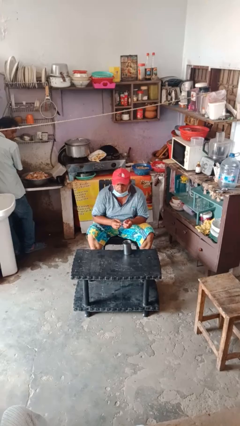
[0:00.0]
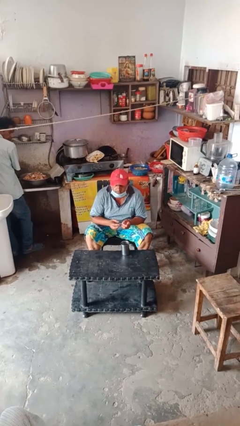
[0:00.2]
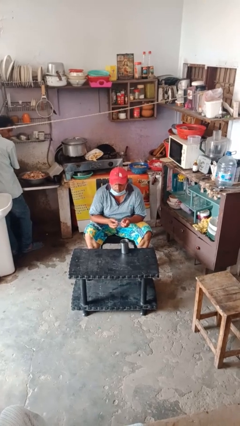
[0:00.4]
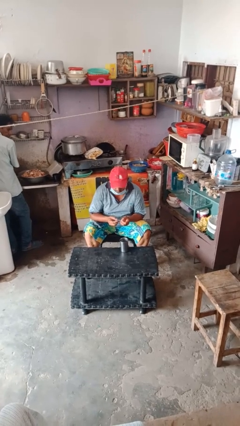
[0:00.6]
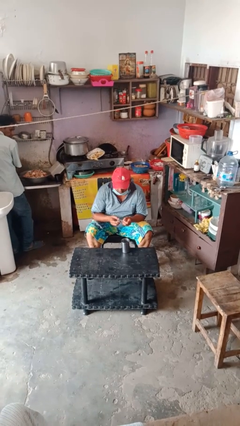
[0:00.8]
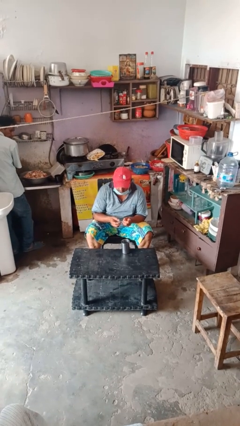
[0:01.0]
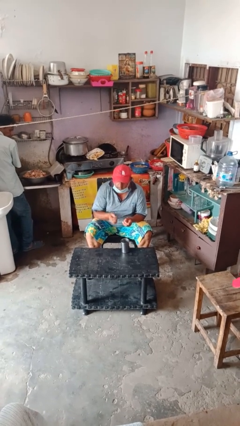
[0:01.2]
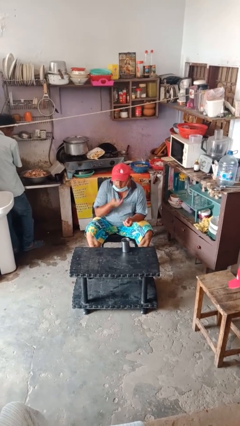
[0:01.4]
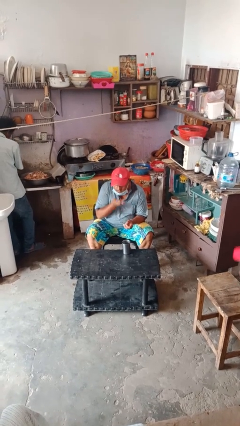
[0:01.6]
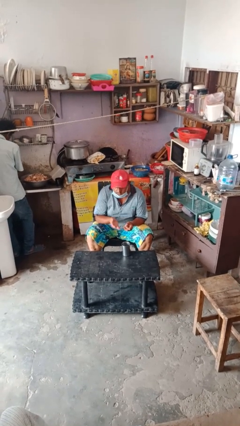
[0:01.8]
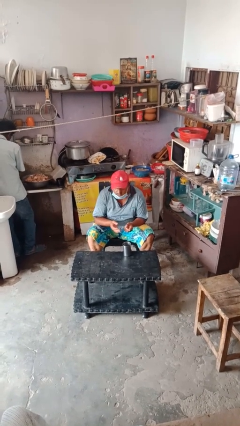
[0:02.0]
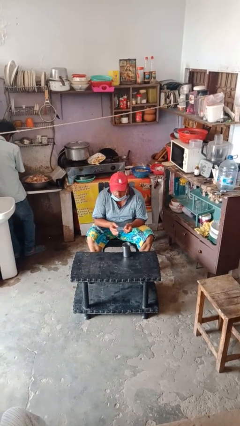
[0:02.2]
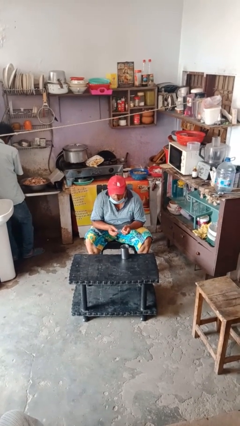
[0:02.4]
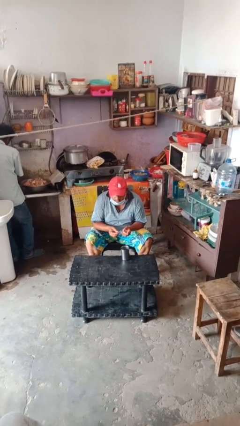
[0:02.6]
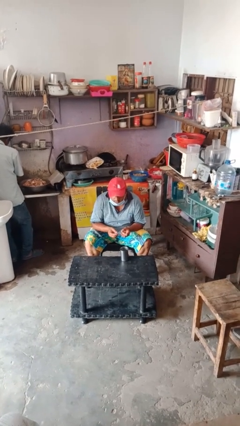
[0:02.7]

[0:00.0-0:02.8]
person takes medicine pills

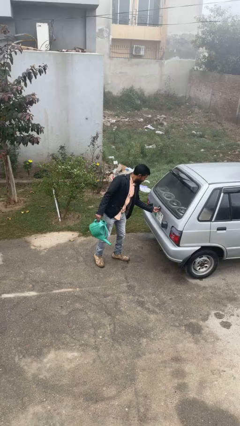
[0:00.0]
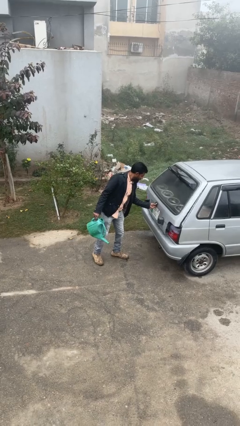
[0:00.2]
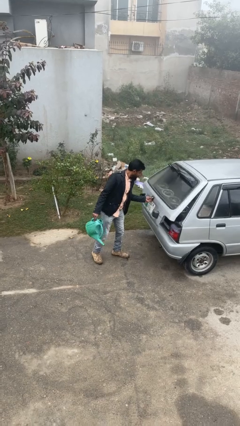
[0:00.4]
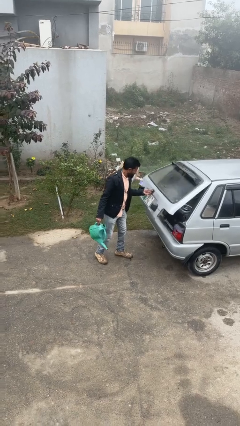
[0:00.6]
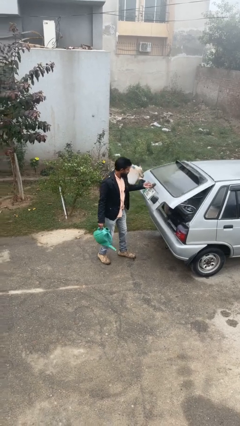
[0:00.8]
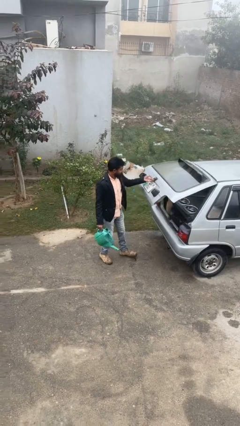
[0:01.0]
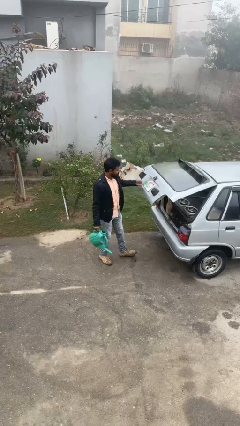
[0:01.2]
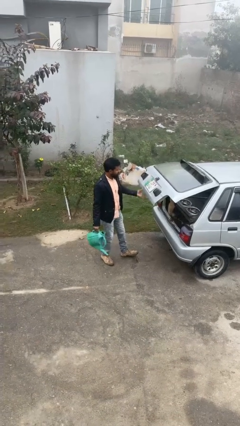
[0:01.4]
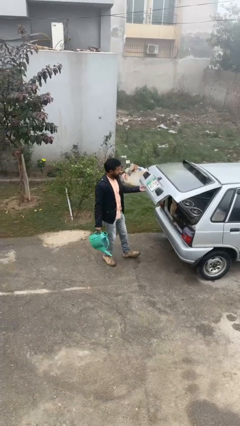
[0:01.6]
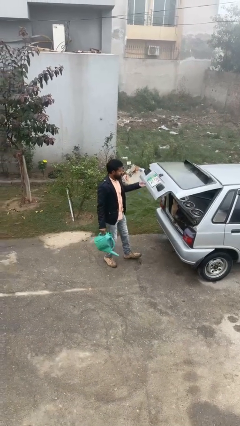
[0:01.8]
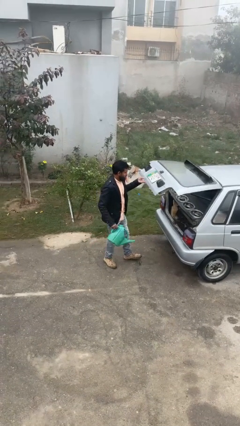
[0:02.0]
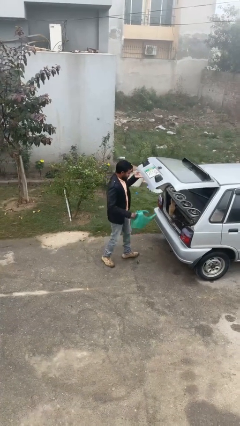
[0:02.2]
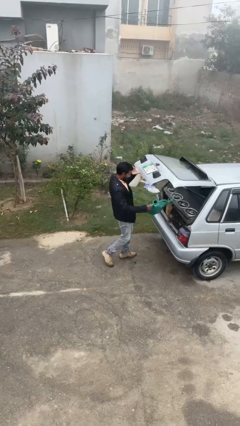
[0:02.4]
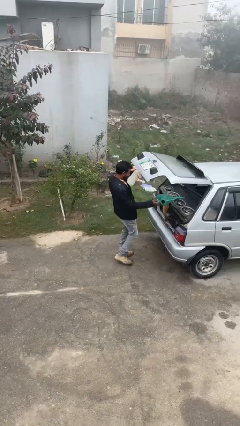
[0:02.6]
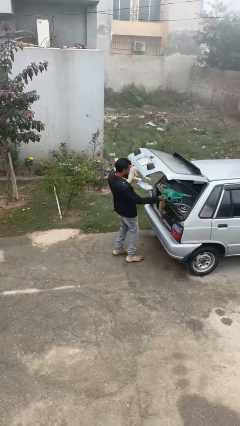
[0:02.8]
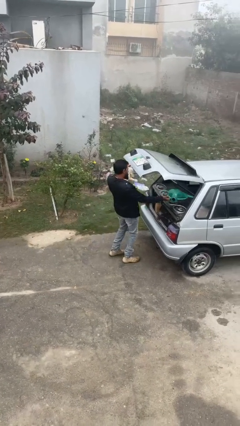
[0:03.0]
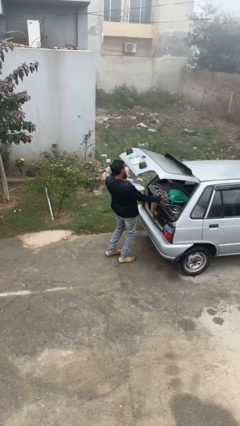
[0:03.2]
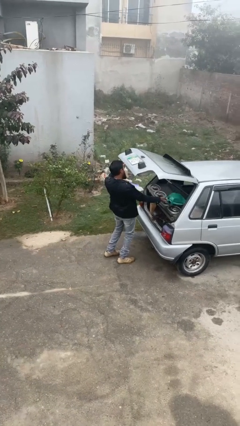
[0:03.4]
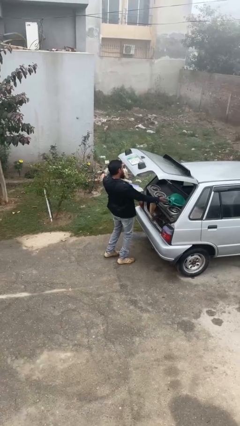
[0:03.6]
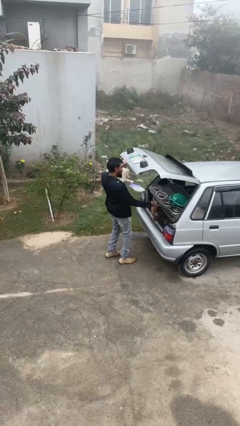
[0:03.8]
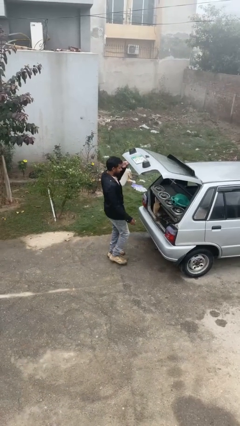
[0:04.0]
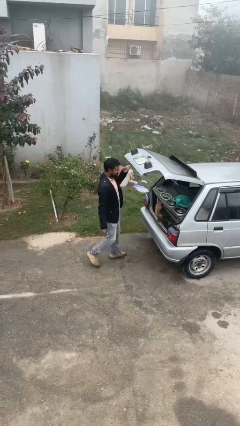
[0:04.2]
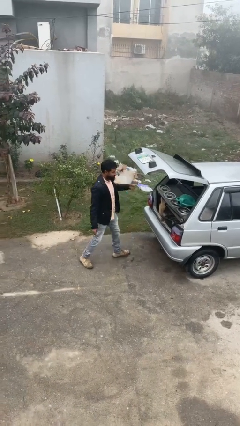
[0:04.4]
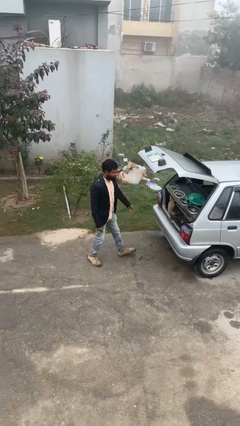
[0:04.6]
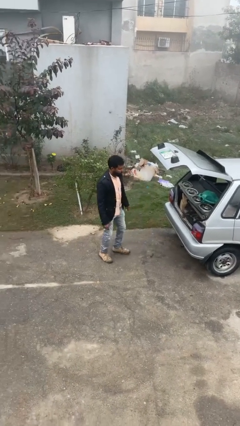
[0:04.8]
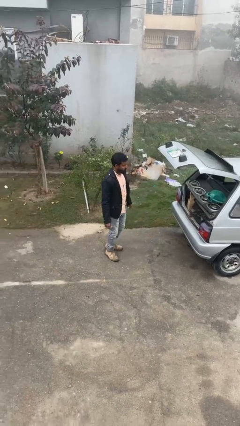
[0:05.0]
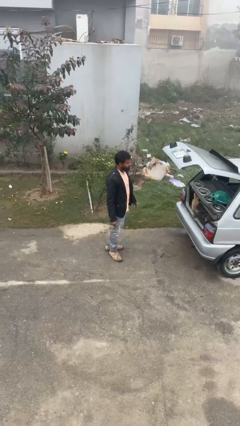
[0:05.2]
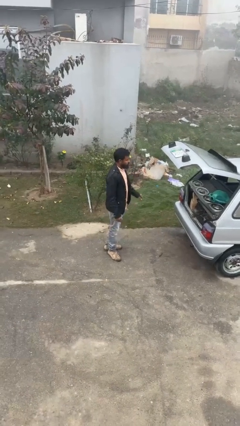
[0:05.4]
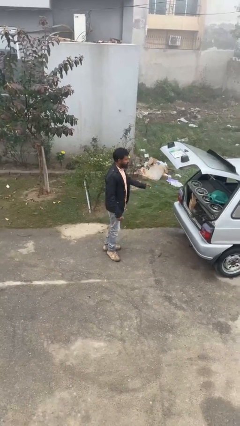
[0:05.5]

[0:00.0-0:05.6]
person loads car

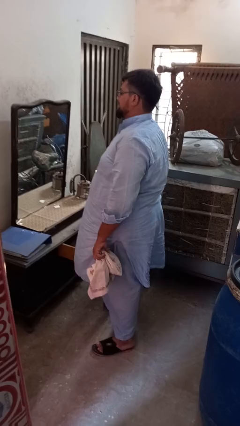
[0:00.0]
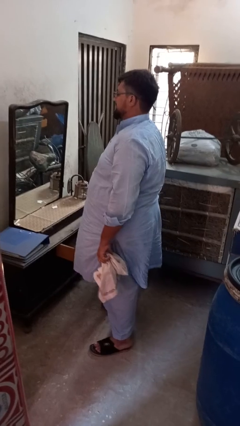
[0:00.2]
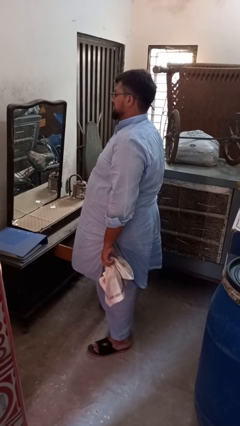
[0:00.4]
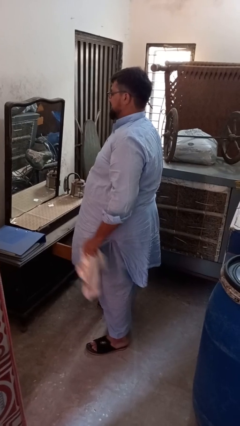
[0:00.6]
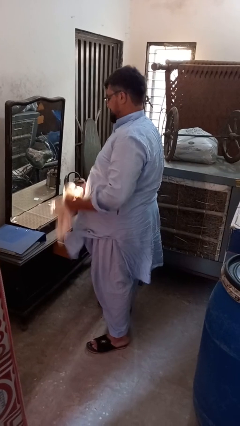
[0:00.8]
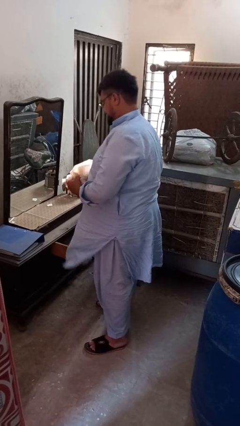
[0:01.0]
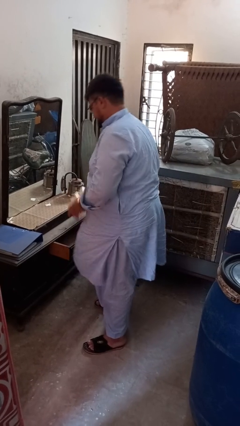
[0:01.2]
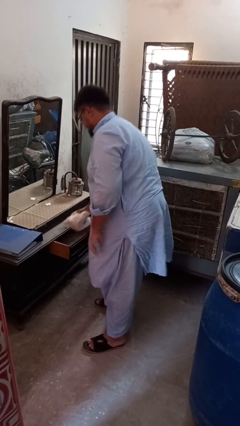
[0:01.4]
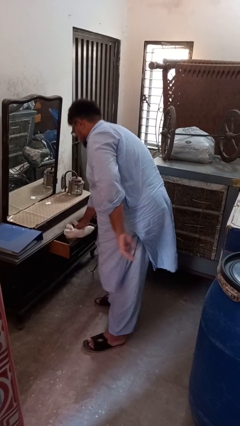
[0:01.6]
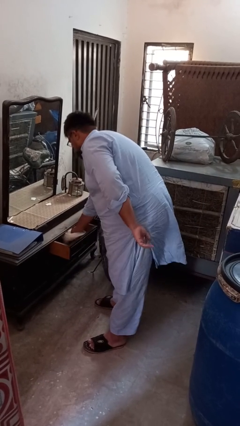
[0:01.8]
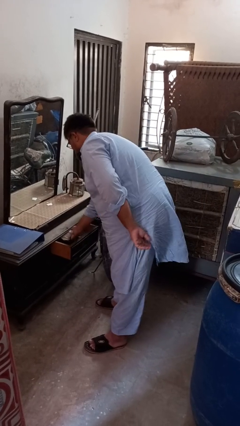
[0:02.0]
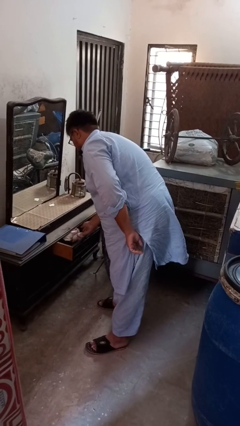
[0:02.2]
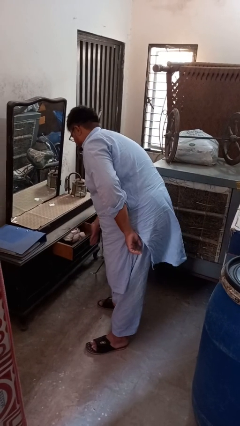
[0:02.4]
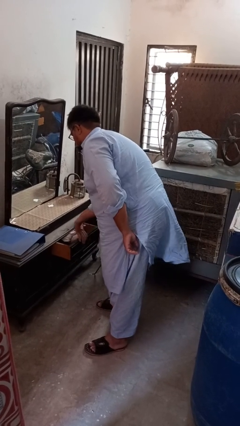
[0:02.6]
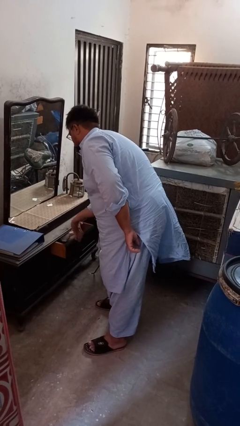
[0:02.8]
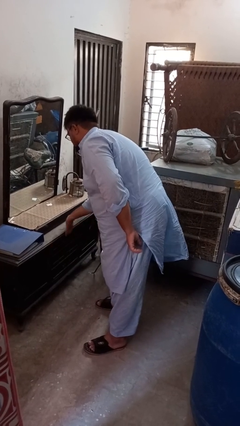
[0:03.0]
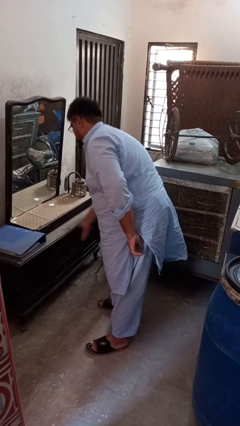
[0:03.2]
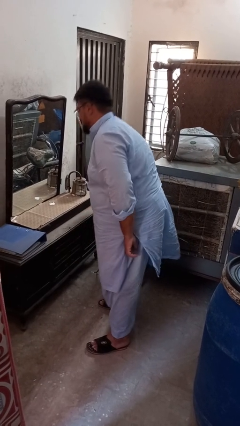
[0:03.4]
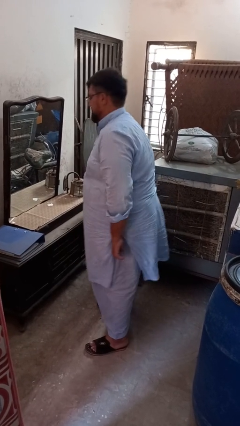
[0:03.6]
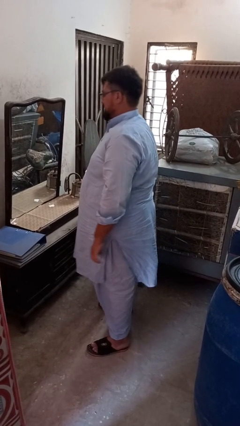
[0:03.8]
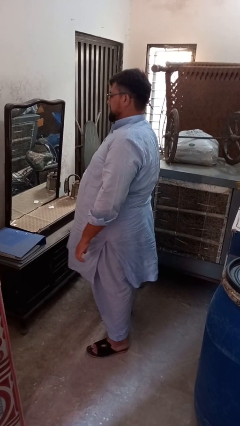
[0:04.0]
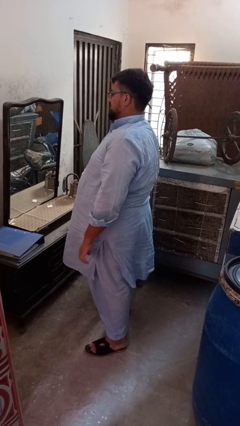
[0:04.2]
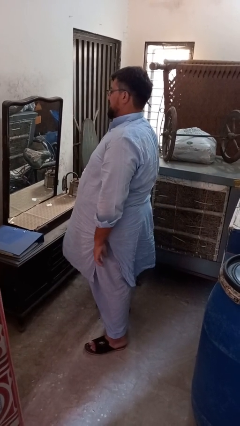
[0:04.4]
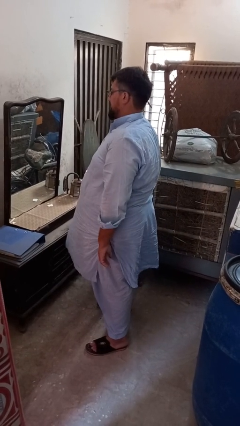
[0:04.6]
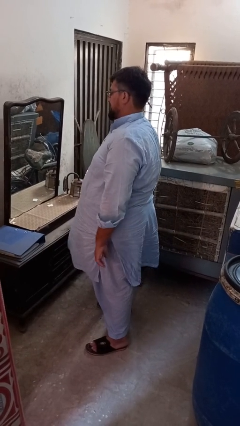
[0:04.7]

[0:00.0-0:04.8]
person puts clothes into dresser

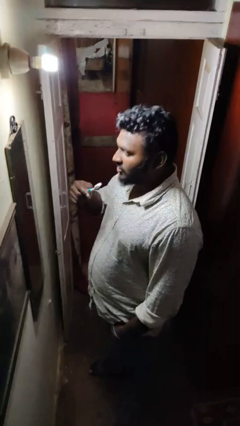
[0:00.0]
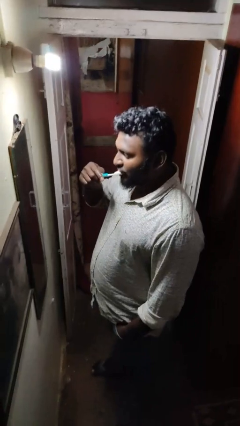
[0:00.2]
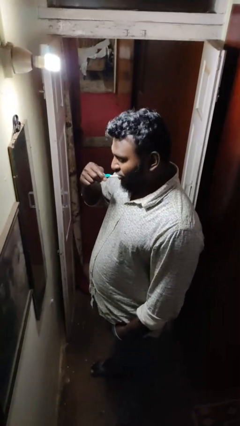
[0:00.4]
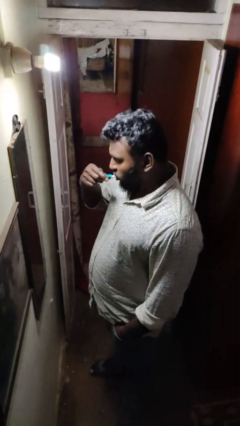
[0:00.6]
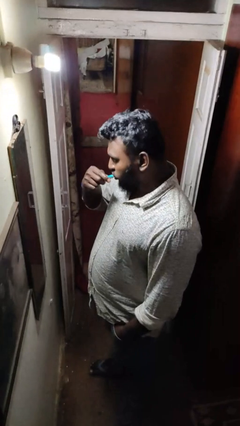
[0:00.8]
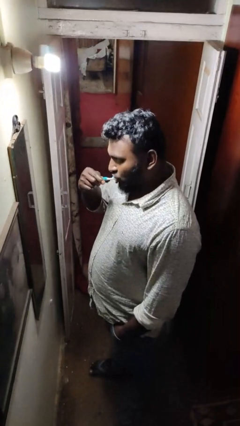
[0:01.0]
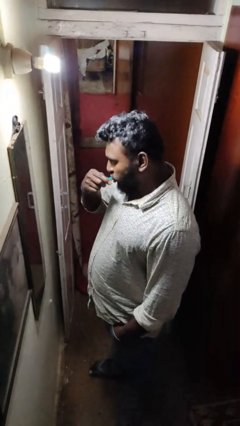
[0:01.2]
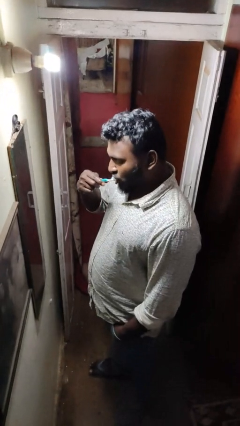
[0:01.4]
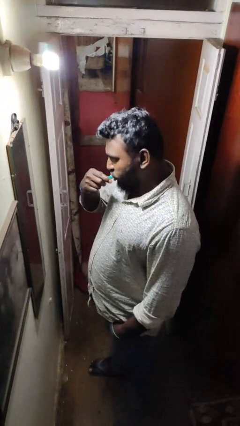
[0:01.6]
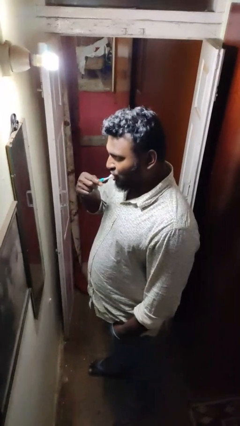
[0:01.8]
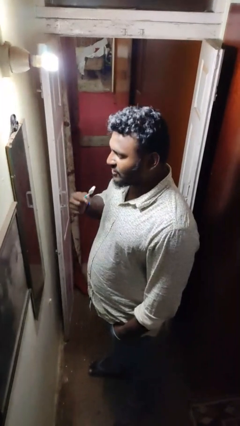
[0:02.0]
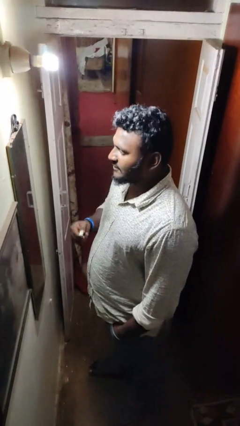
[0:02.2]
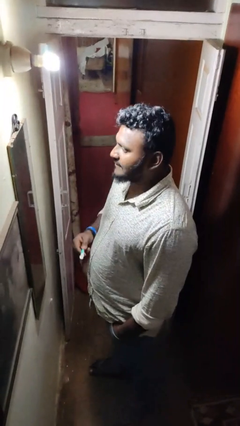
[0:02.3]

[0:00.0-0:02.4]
person brushes teeth

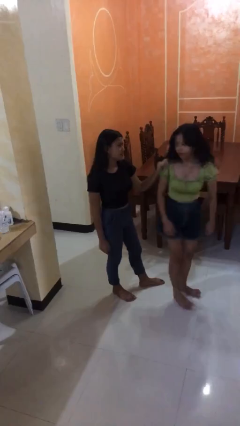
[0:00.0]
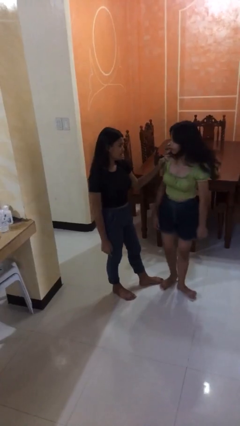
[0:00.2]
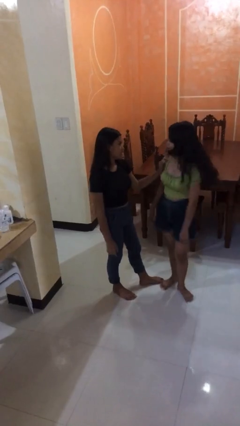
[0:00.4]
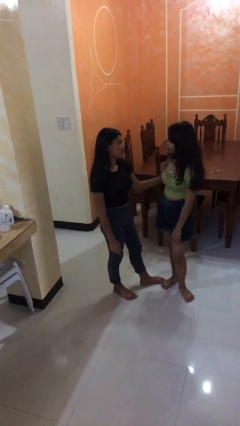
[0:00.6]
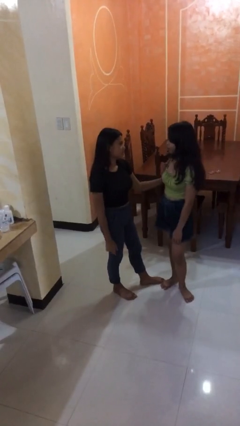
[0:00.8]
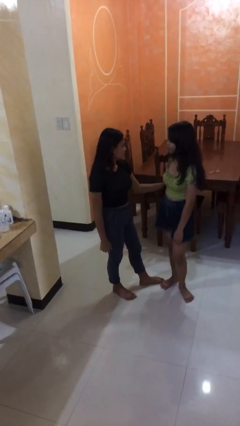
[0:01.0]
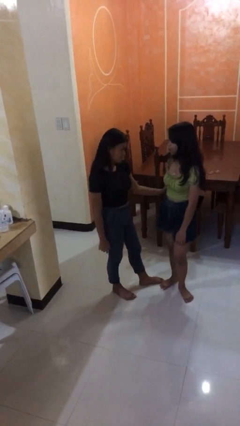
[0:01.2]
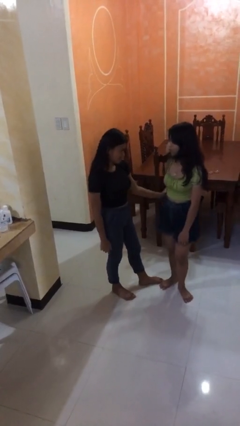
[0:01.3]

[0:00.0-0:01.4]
person spins person around

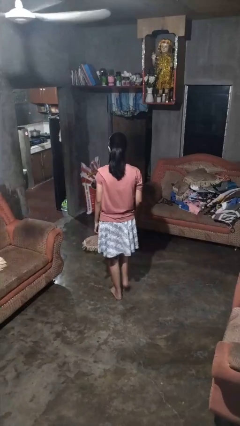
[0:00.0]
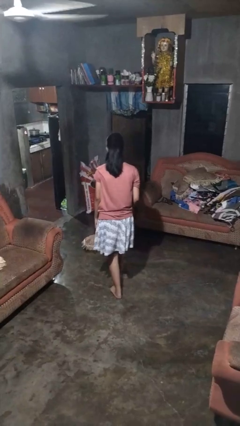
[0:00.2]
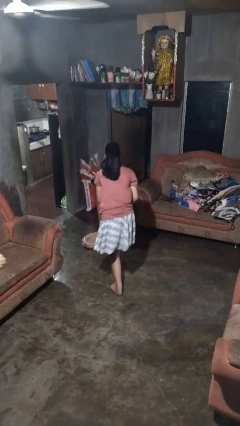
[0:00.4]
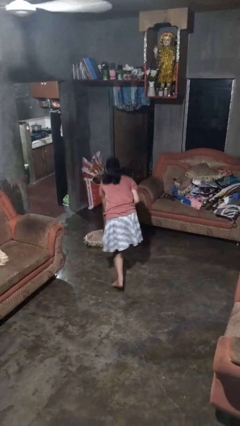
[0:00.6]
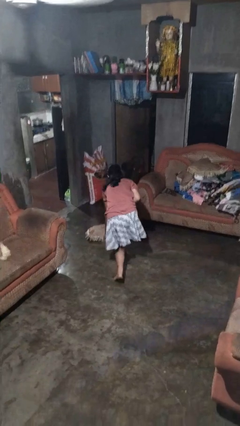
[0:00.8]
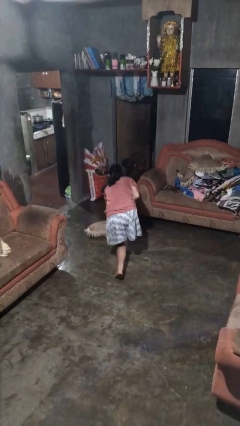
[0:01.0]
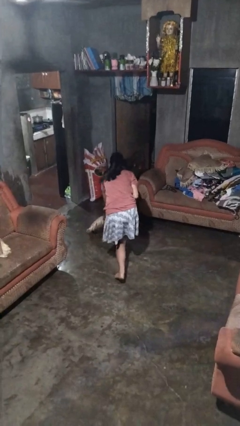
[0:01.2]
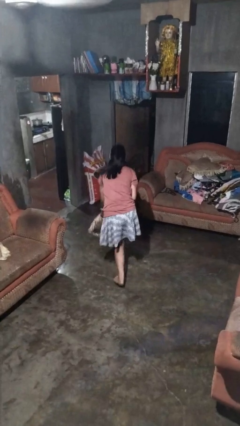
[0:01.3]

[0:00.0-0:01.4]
person picks up object from floor
